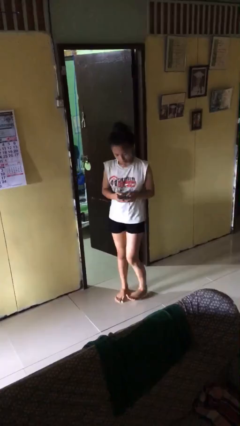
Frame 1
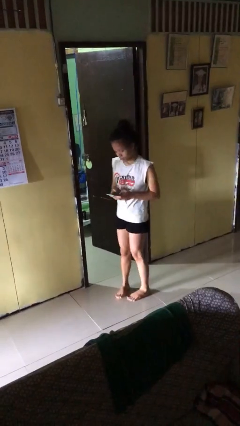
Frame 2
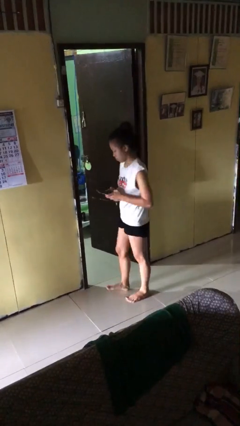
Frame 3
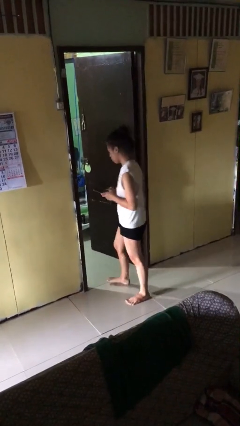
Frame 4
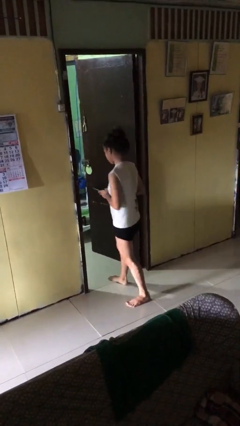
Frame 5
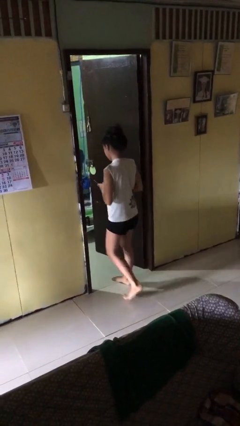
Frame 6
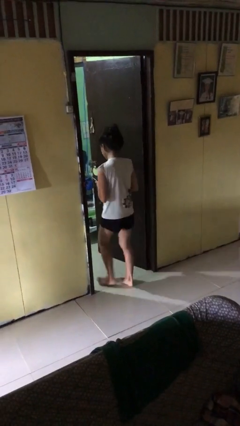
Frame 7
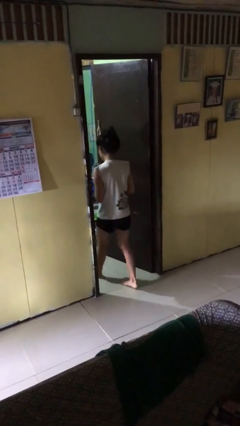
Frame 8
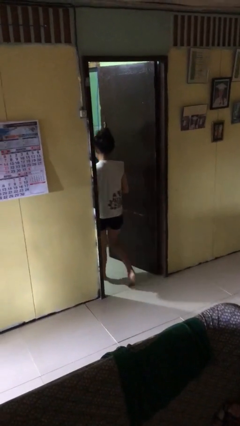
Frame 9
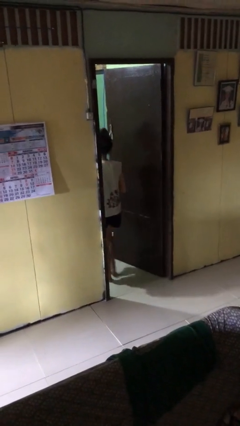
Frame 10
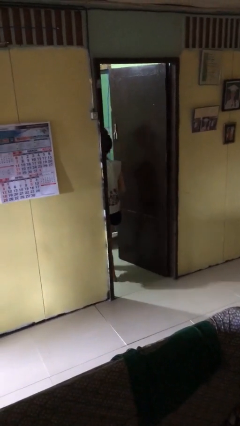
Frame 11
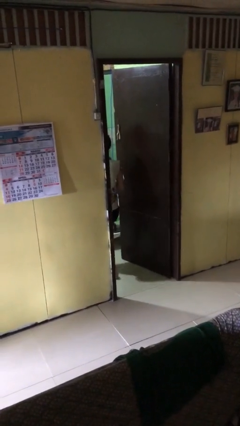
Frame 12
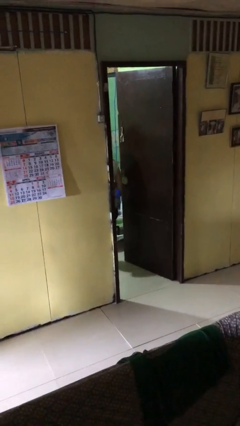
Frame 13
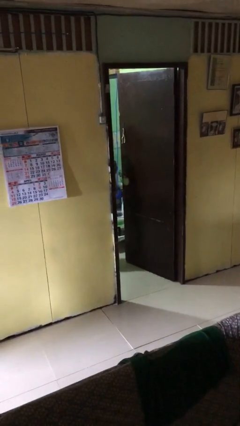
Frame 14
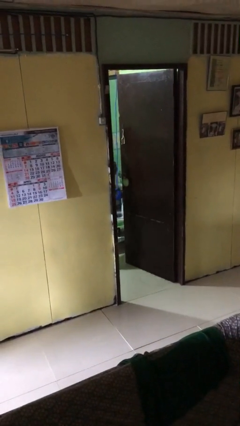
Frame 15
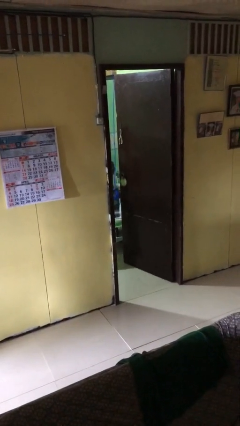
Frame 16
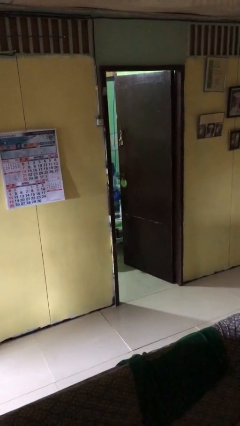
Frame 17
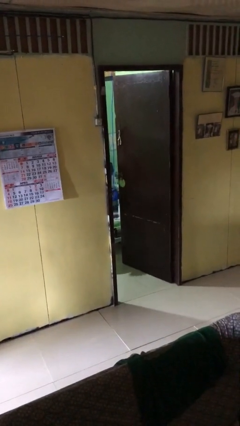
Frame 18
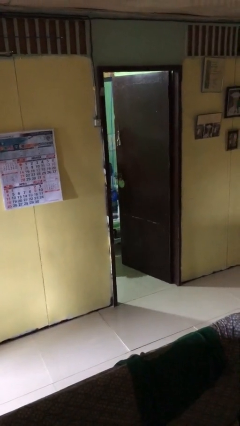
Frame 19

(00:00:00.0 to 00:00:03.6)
person exits scene through structure

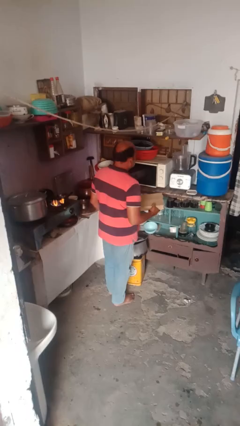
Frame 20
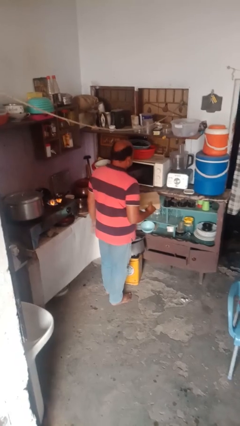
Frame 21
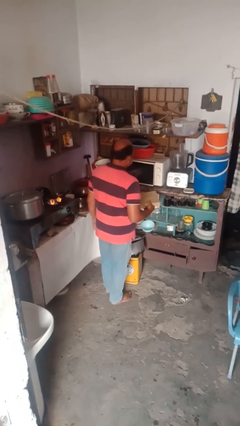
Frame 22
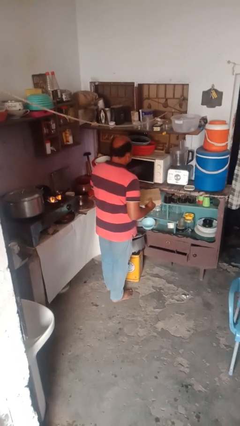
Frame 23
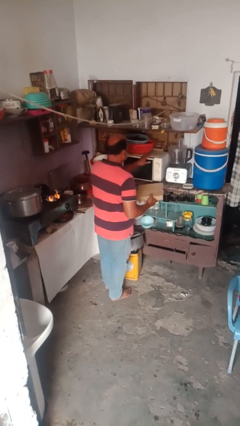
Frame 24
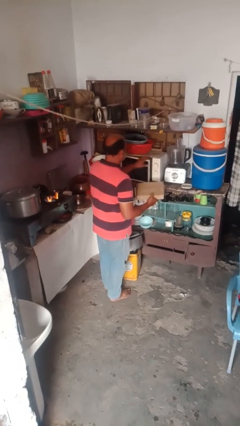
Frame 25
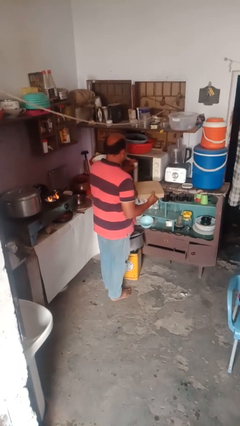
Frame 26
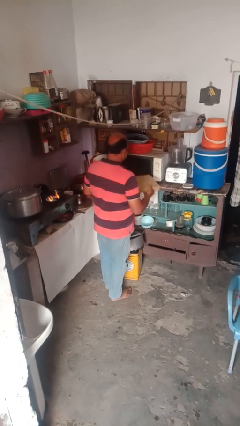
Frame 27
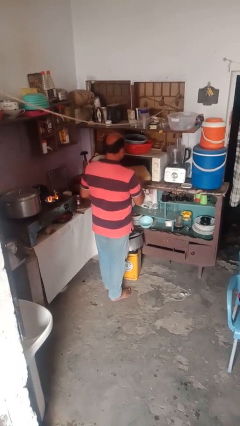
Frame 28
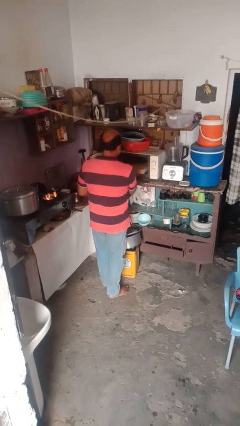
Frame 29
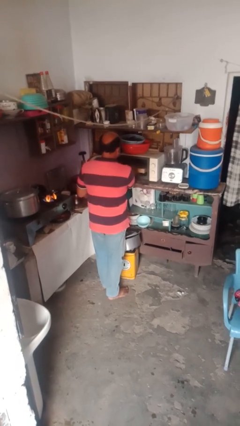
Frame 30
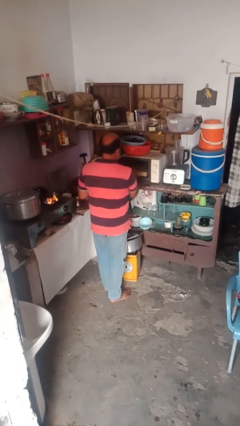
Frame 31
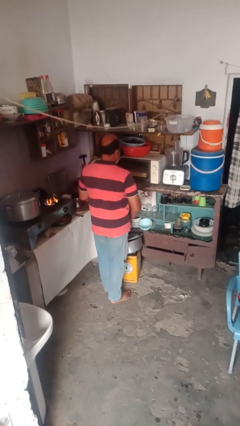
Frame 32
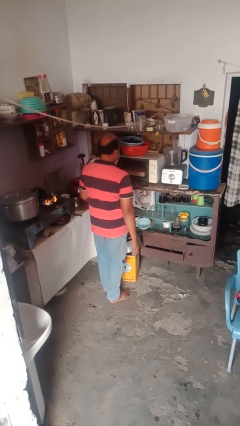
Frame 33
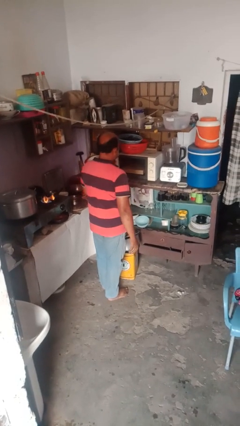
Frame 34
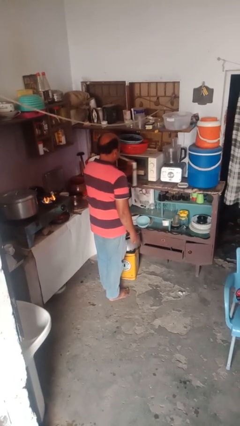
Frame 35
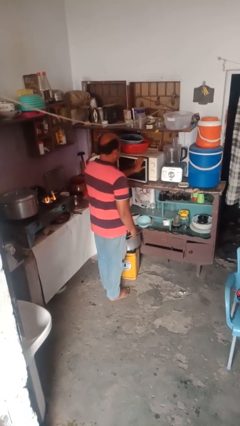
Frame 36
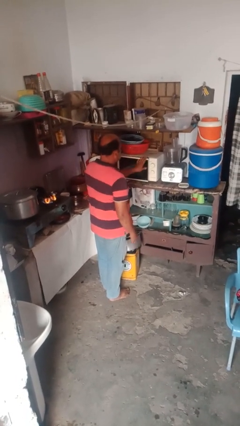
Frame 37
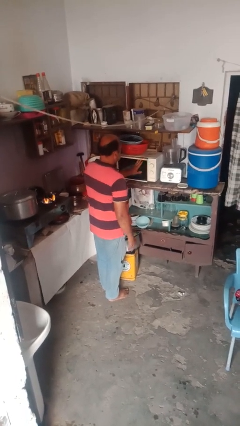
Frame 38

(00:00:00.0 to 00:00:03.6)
person puts object into microwave

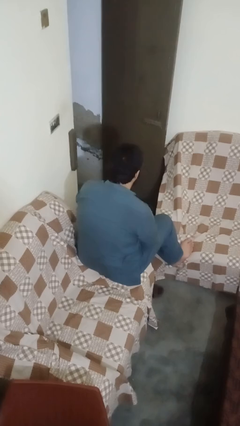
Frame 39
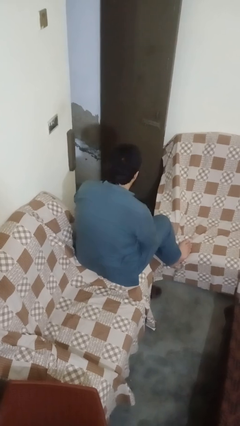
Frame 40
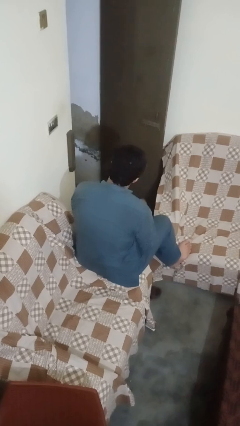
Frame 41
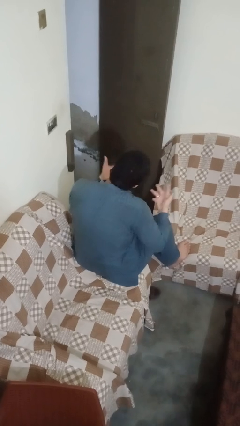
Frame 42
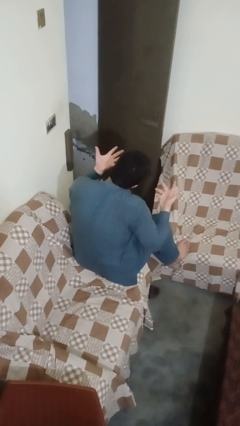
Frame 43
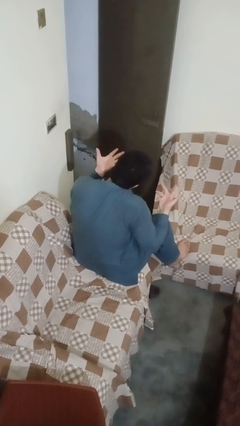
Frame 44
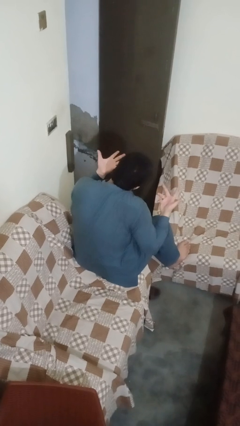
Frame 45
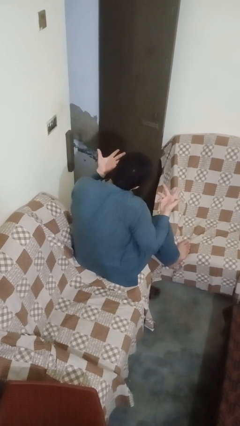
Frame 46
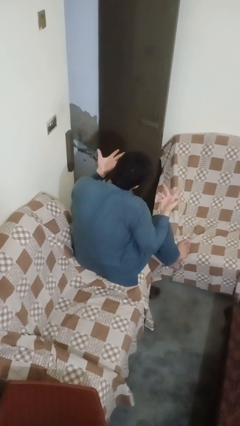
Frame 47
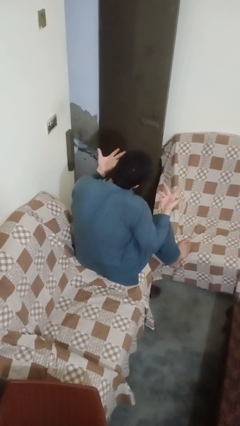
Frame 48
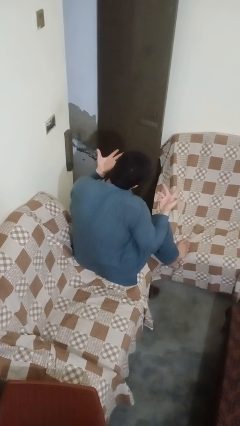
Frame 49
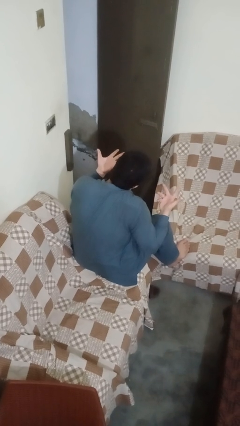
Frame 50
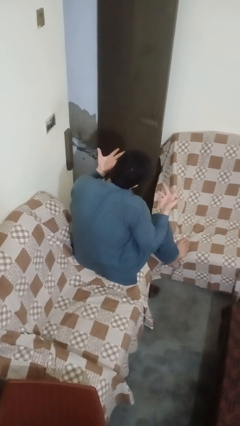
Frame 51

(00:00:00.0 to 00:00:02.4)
person shrugs

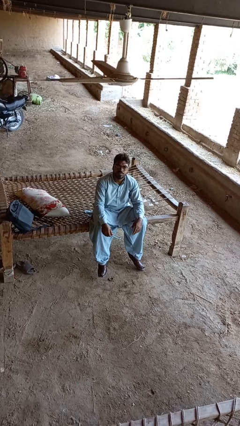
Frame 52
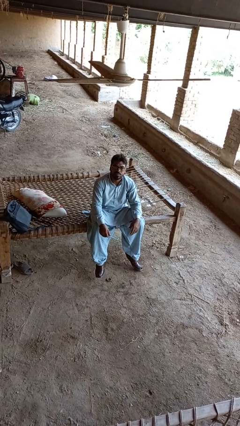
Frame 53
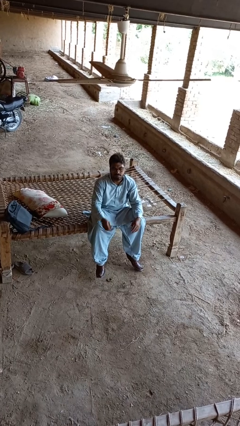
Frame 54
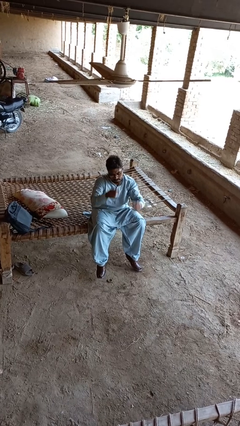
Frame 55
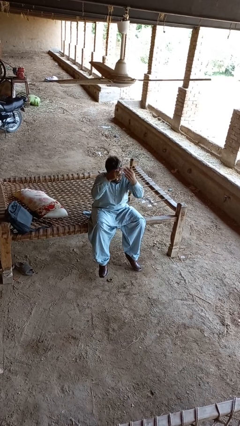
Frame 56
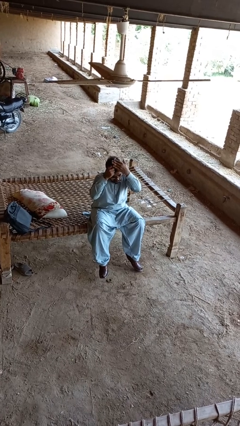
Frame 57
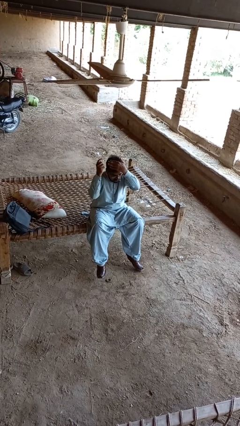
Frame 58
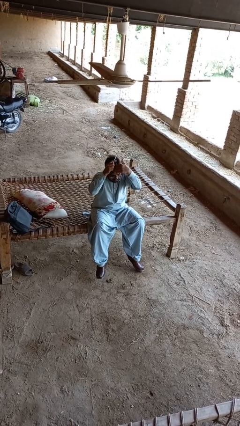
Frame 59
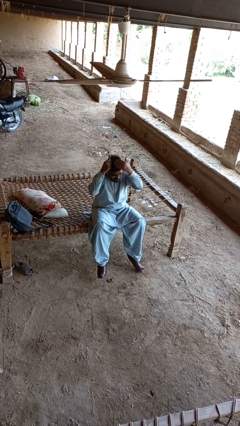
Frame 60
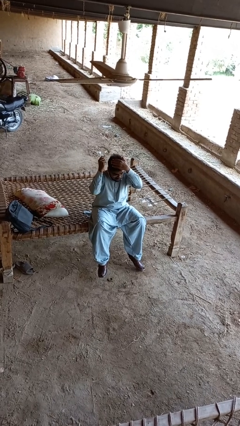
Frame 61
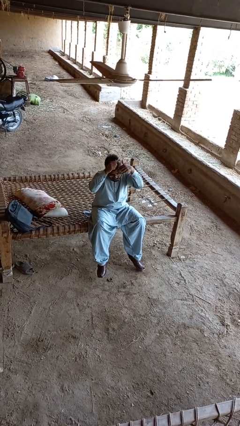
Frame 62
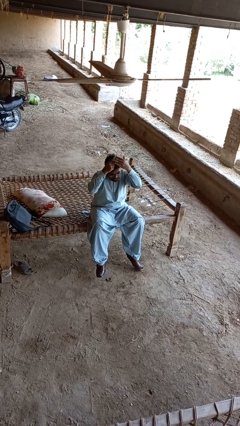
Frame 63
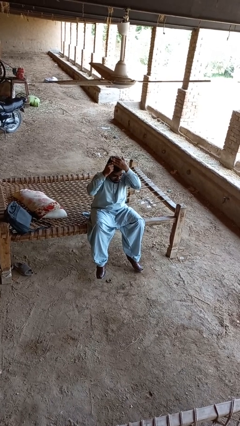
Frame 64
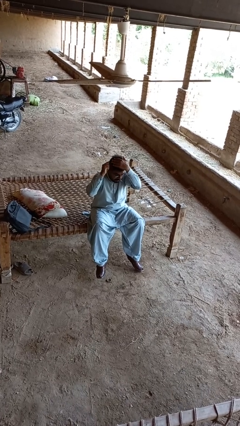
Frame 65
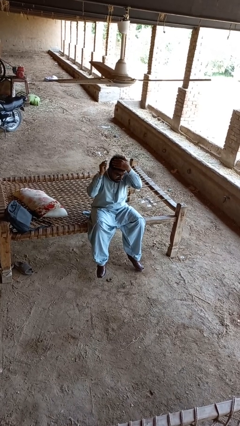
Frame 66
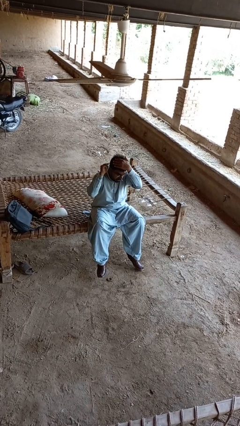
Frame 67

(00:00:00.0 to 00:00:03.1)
person brushes hair

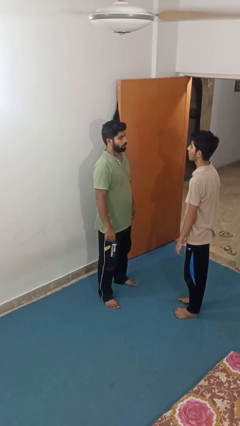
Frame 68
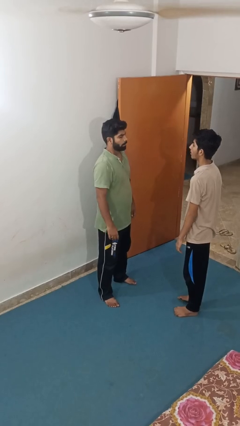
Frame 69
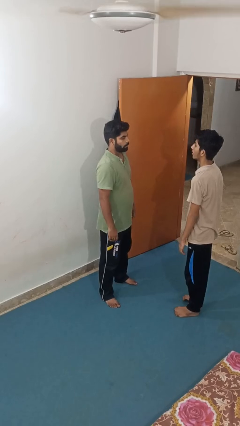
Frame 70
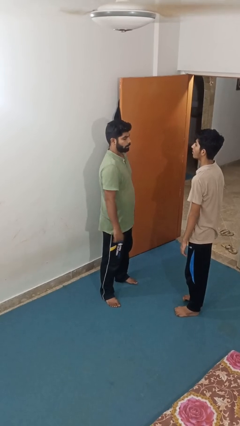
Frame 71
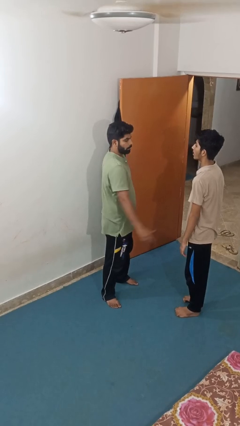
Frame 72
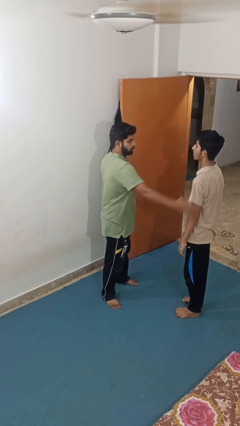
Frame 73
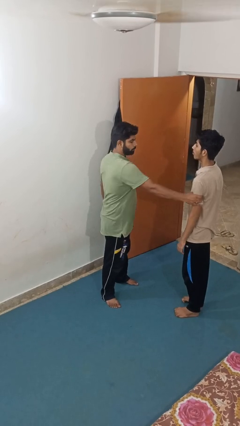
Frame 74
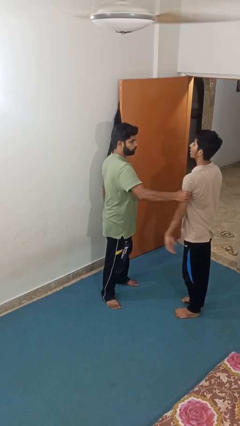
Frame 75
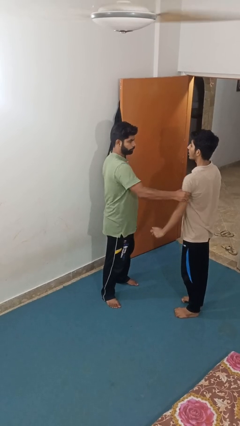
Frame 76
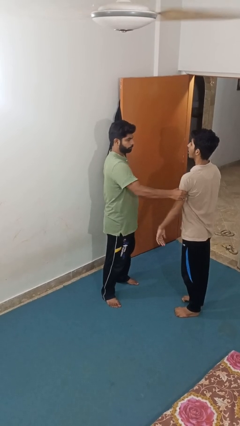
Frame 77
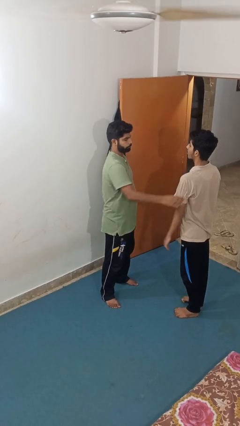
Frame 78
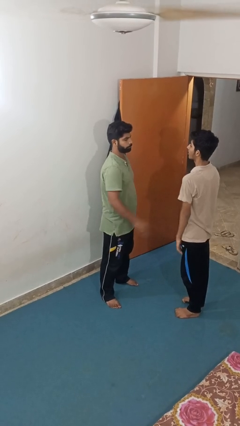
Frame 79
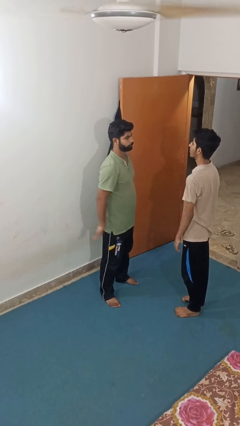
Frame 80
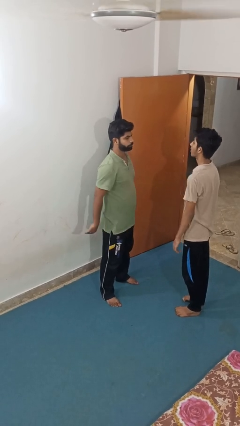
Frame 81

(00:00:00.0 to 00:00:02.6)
person grabs person by bicep

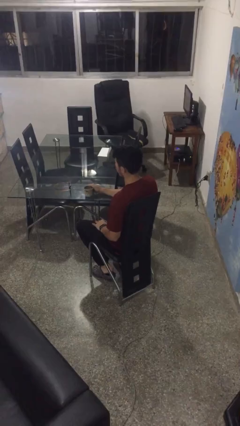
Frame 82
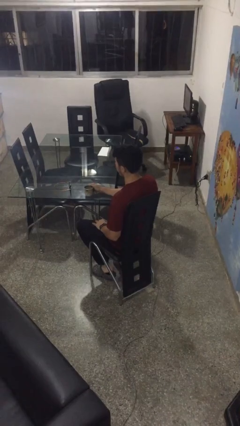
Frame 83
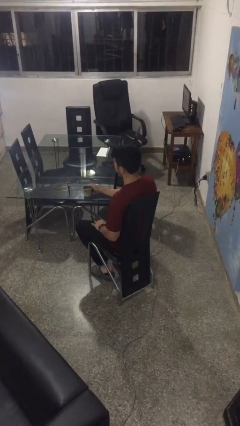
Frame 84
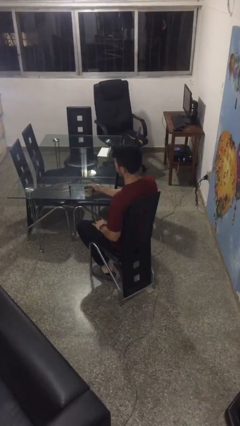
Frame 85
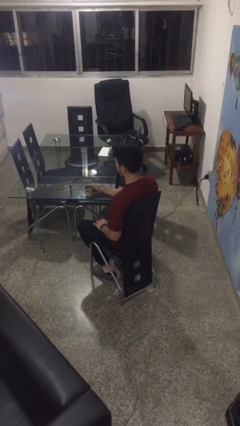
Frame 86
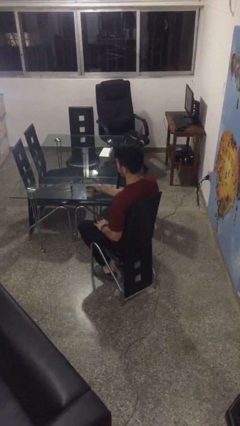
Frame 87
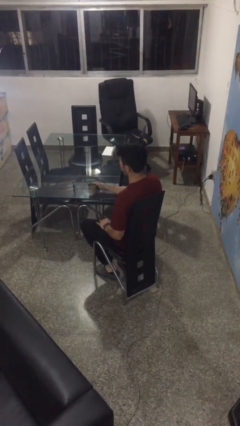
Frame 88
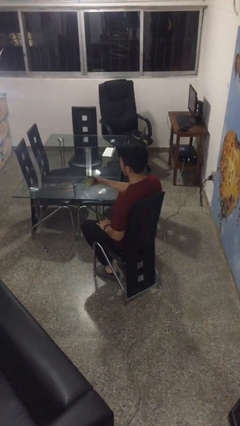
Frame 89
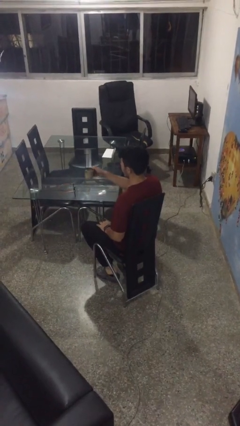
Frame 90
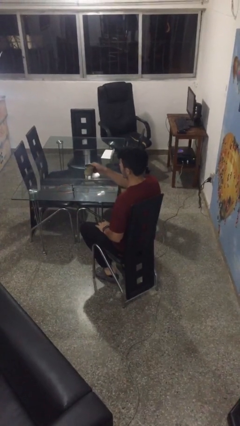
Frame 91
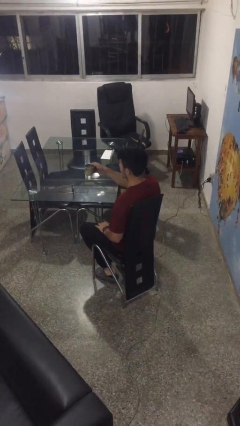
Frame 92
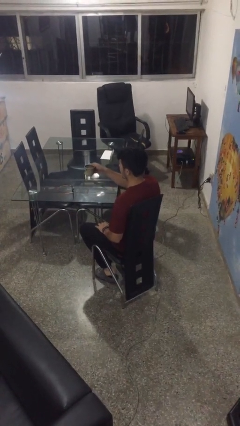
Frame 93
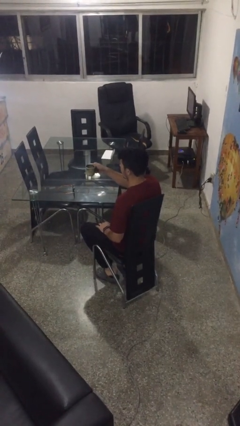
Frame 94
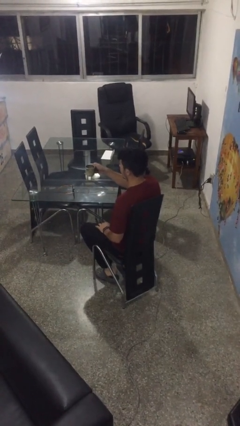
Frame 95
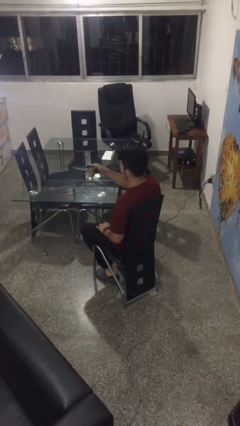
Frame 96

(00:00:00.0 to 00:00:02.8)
person picks up object from table
